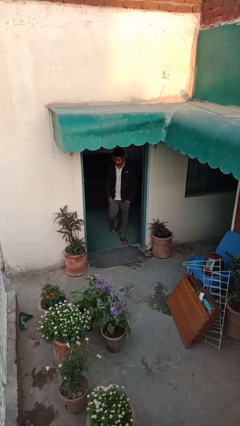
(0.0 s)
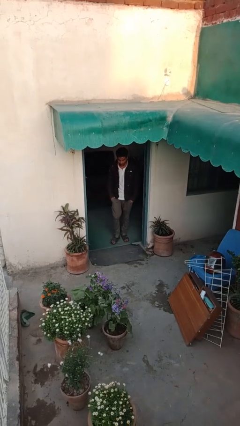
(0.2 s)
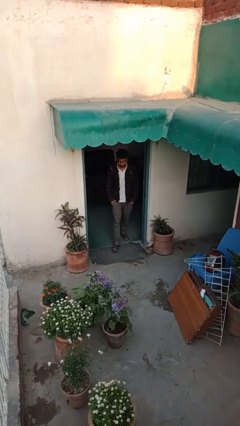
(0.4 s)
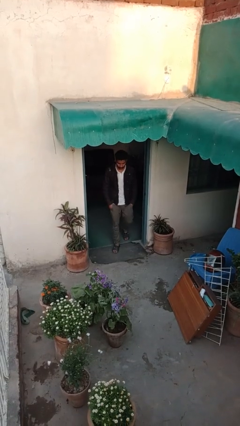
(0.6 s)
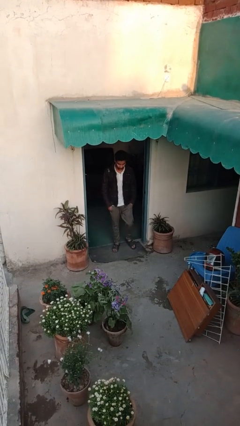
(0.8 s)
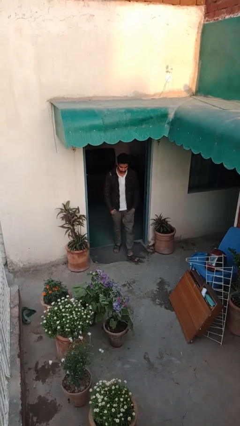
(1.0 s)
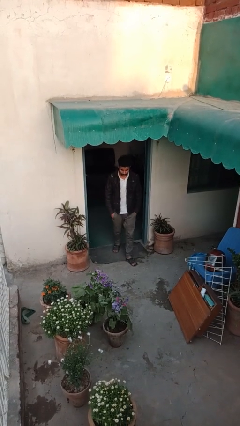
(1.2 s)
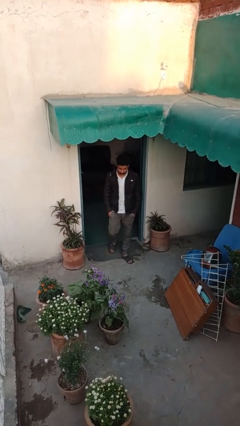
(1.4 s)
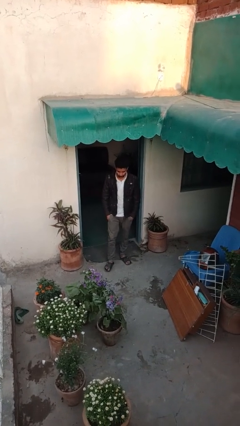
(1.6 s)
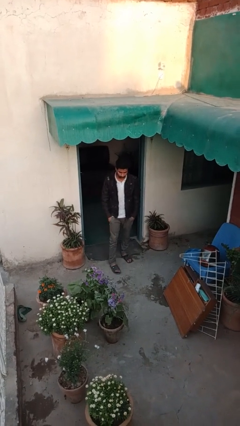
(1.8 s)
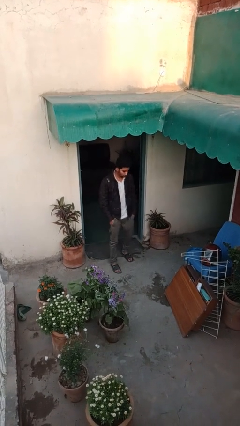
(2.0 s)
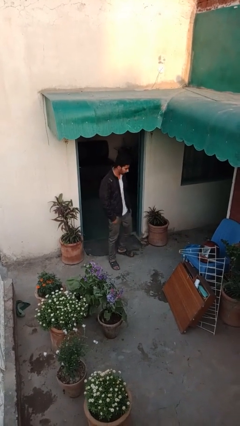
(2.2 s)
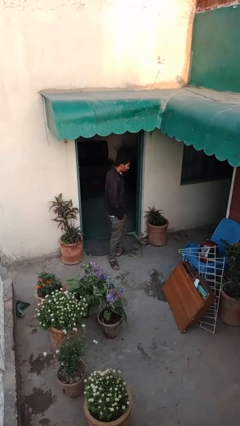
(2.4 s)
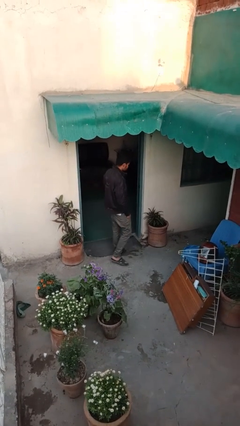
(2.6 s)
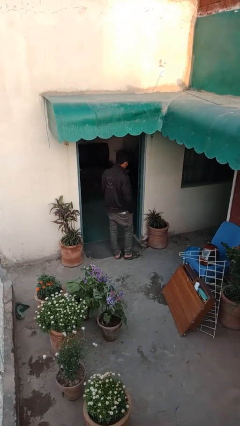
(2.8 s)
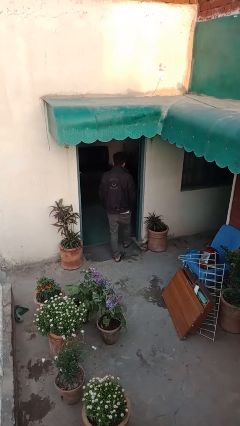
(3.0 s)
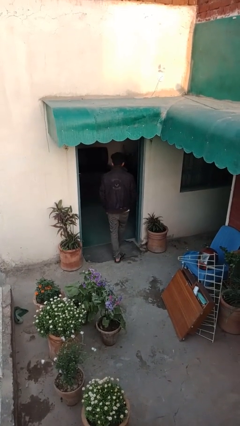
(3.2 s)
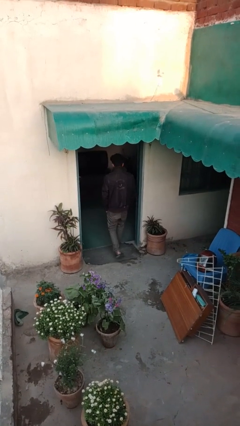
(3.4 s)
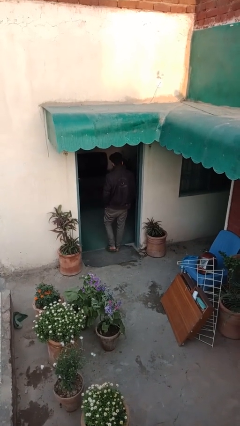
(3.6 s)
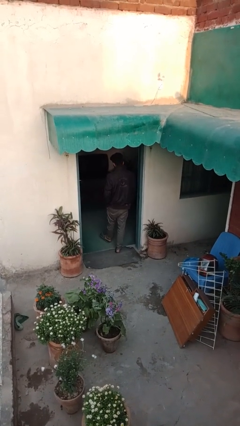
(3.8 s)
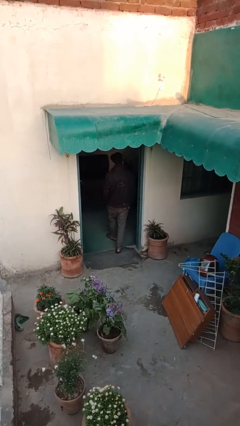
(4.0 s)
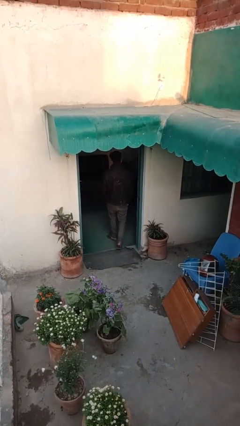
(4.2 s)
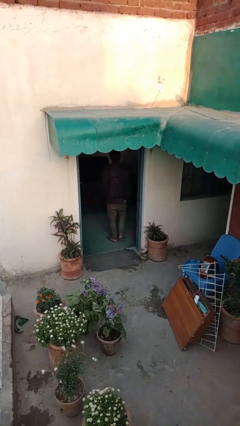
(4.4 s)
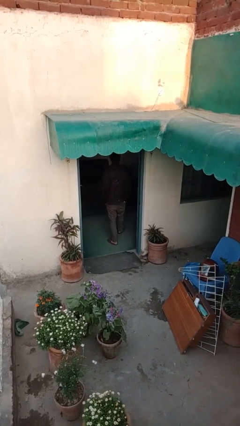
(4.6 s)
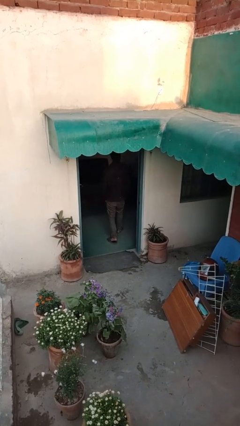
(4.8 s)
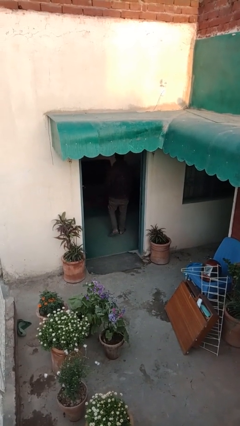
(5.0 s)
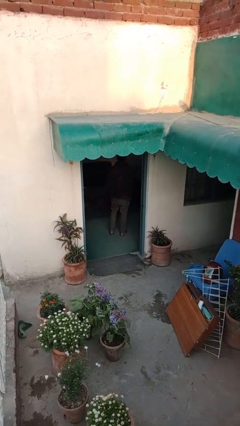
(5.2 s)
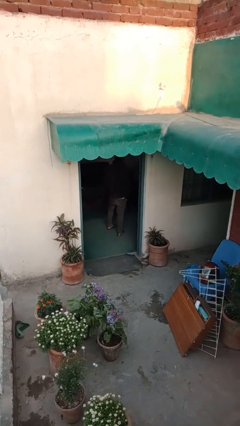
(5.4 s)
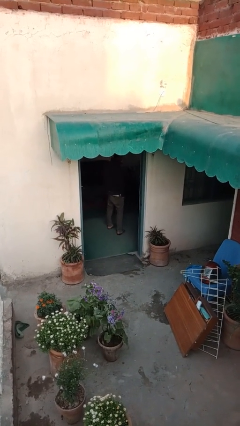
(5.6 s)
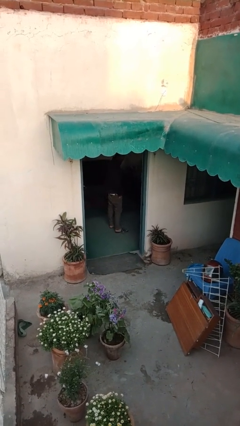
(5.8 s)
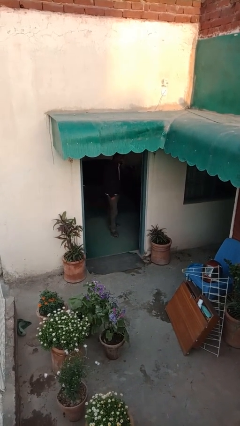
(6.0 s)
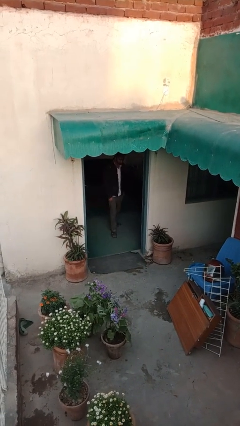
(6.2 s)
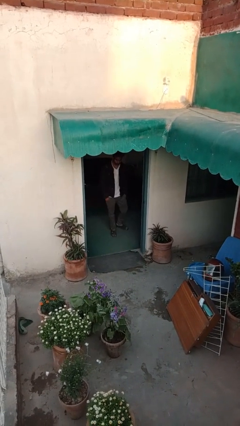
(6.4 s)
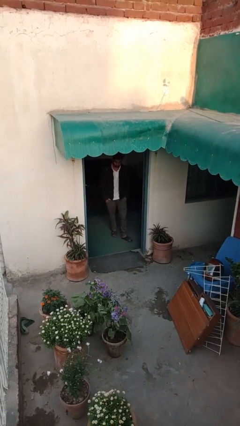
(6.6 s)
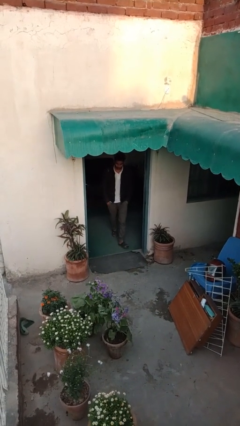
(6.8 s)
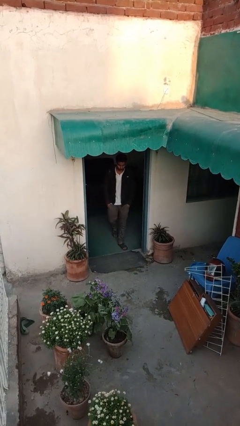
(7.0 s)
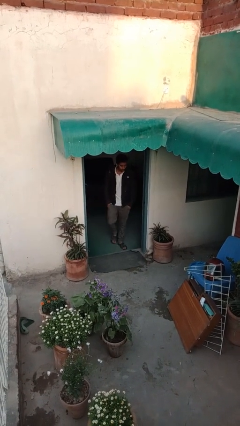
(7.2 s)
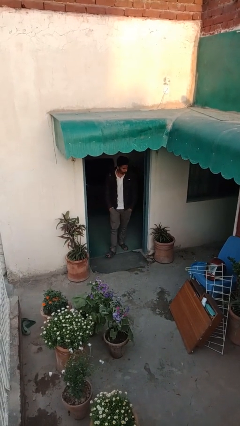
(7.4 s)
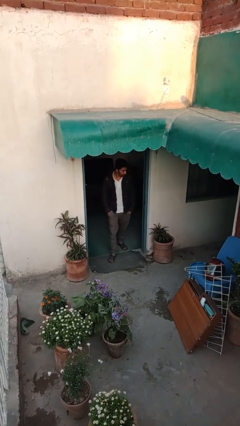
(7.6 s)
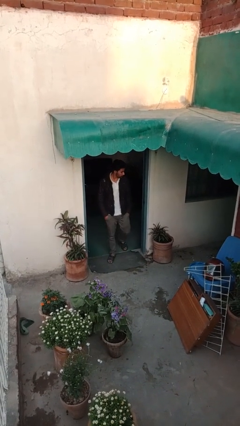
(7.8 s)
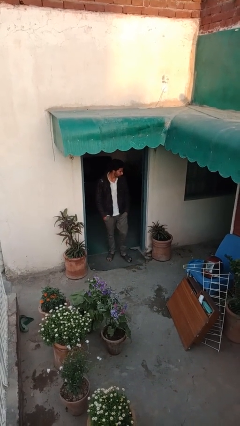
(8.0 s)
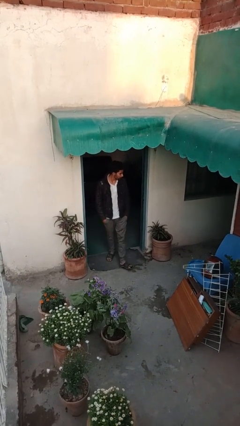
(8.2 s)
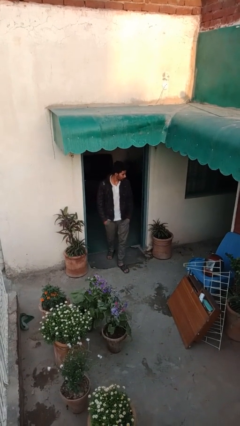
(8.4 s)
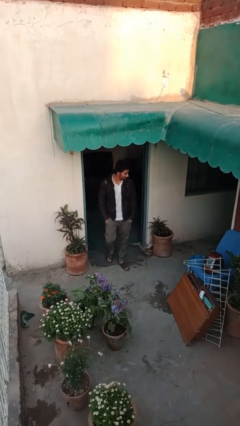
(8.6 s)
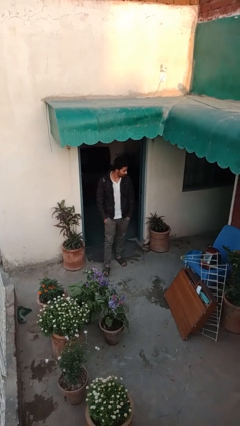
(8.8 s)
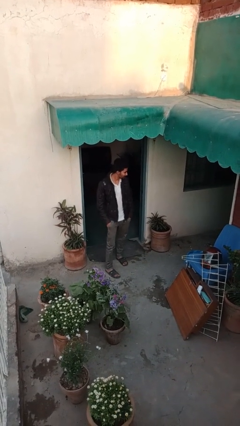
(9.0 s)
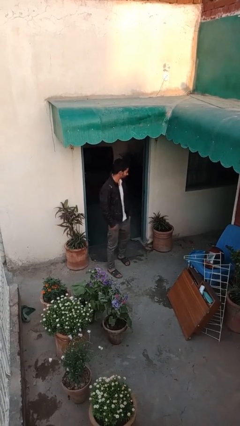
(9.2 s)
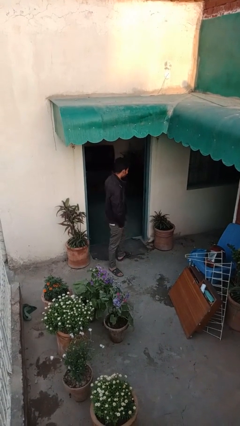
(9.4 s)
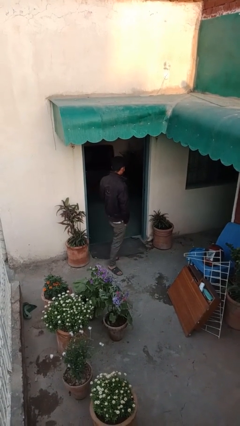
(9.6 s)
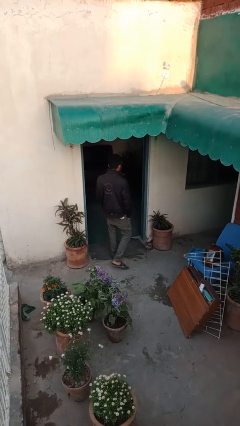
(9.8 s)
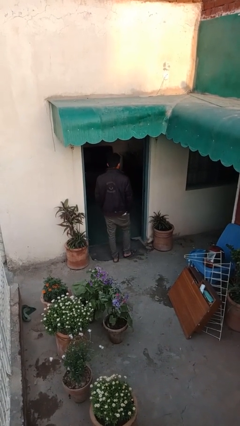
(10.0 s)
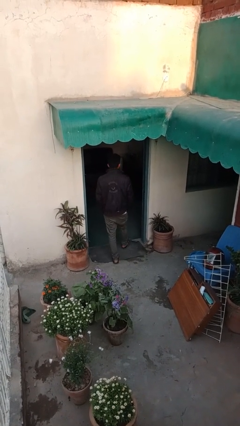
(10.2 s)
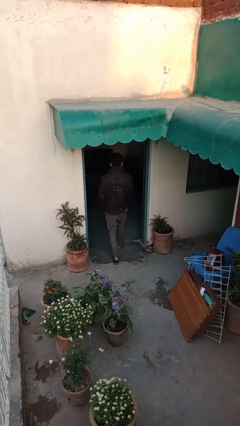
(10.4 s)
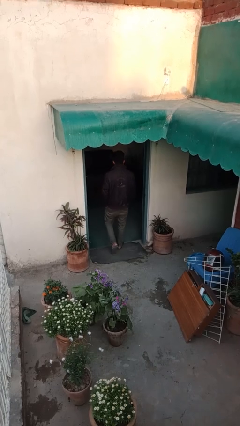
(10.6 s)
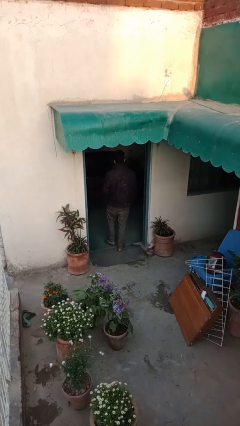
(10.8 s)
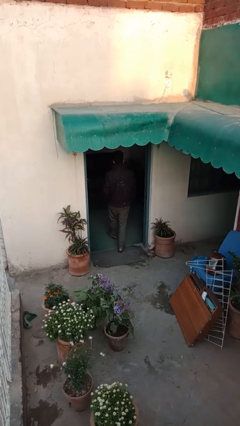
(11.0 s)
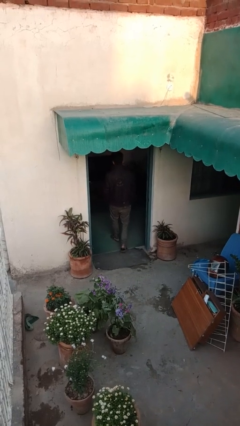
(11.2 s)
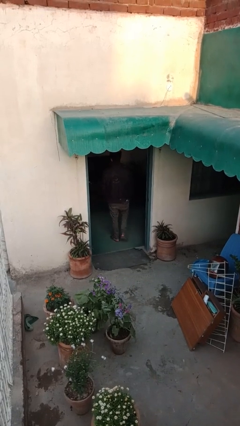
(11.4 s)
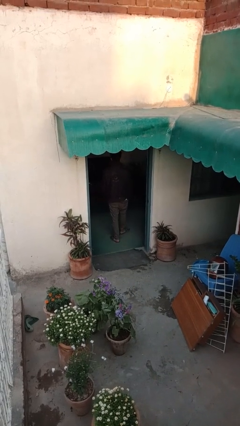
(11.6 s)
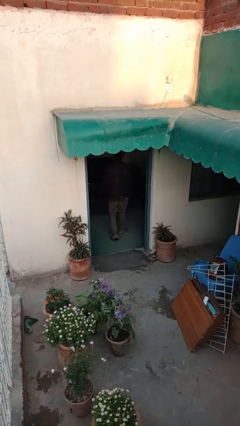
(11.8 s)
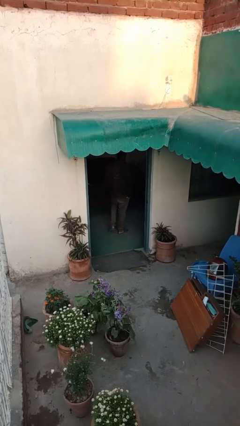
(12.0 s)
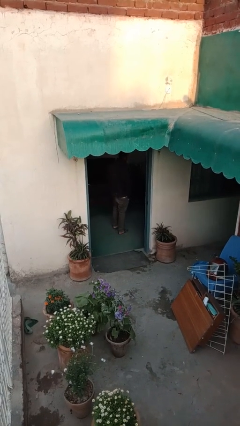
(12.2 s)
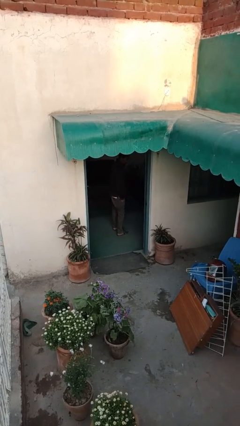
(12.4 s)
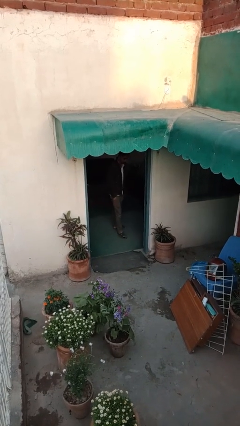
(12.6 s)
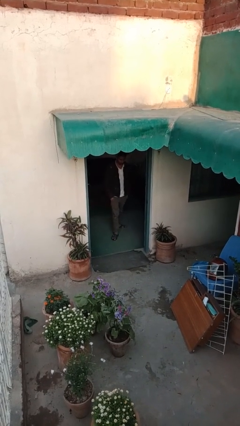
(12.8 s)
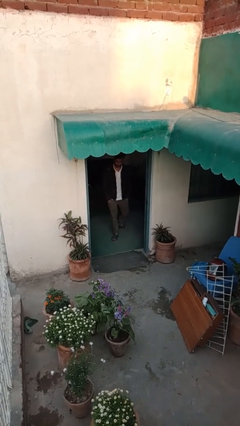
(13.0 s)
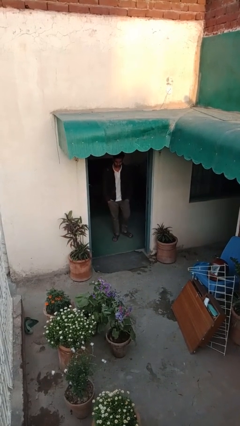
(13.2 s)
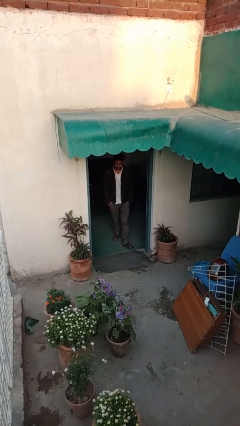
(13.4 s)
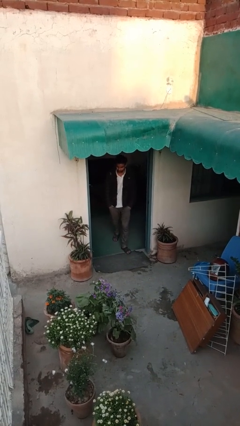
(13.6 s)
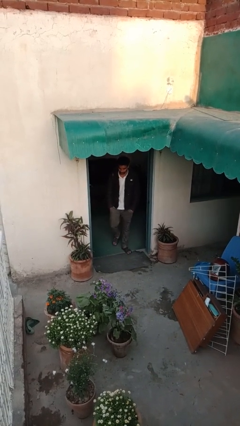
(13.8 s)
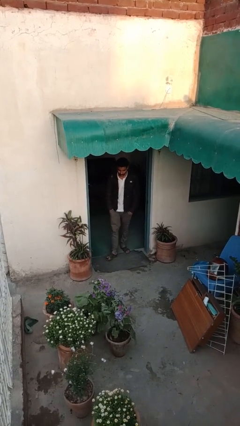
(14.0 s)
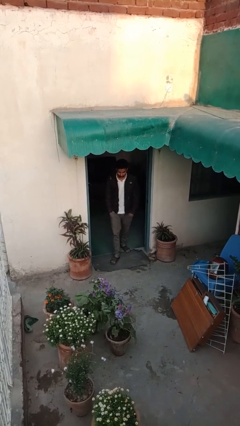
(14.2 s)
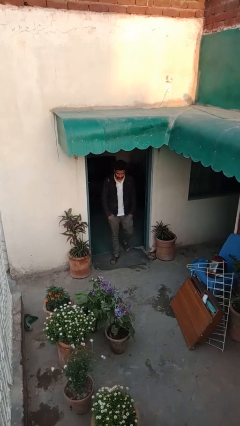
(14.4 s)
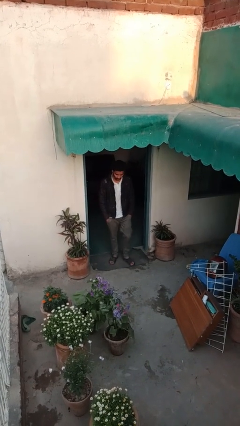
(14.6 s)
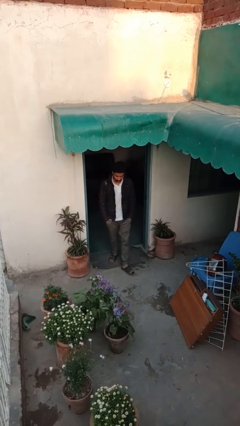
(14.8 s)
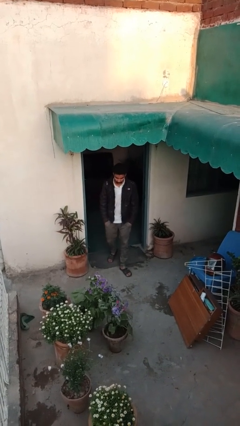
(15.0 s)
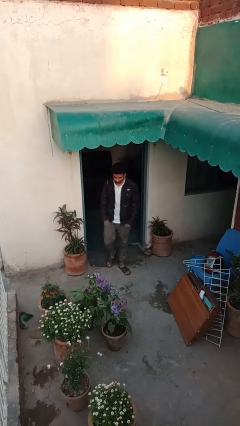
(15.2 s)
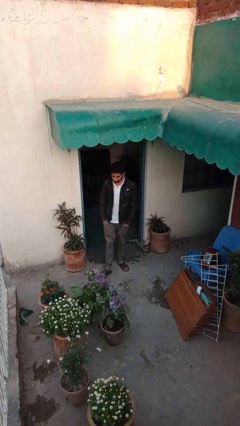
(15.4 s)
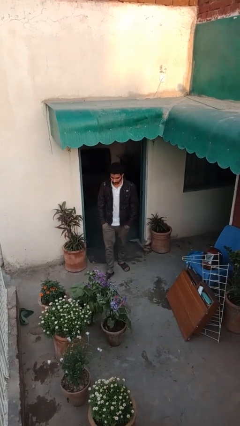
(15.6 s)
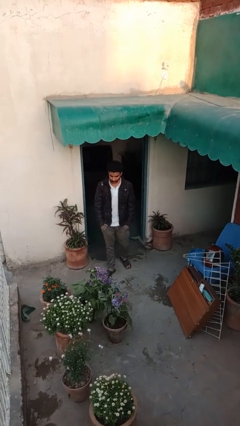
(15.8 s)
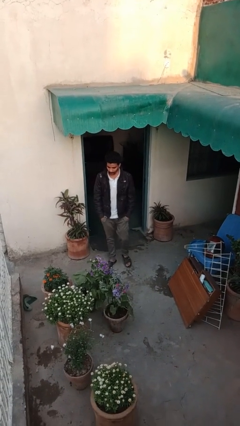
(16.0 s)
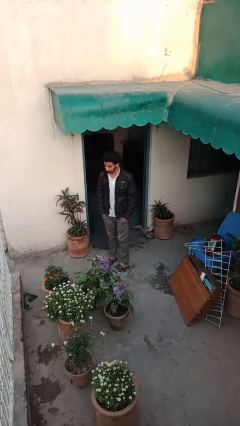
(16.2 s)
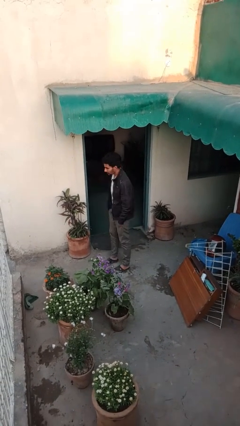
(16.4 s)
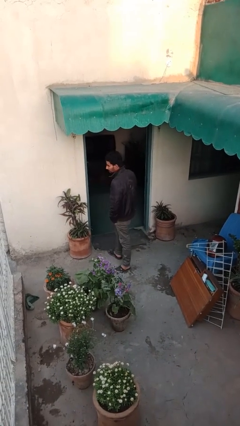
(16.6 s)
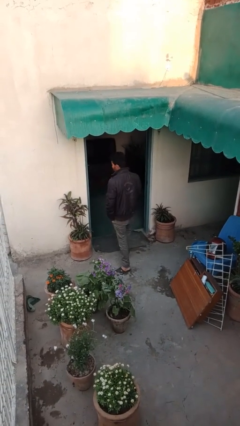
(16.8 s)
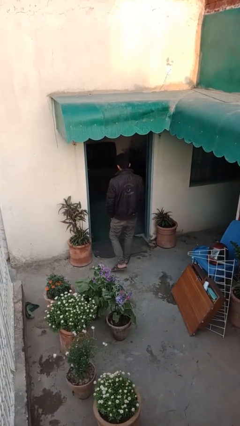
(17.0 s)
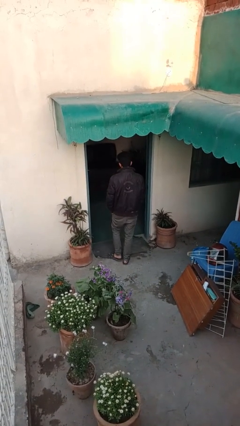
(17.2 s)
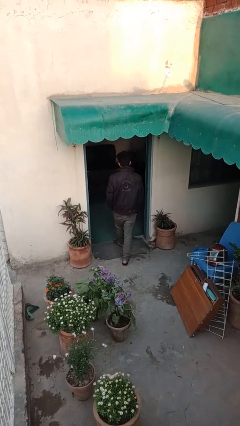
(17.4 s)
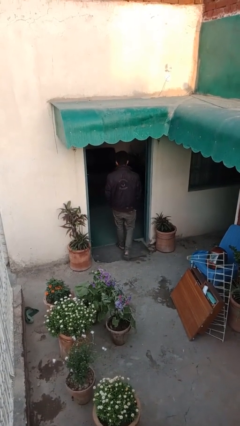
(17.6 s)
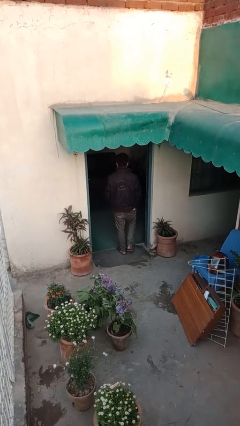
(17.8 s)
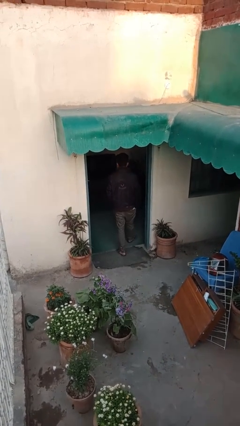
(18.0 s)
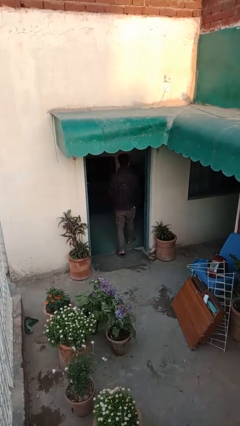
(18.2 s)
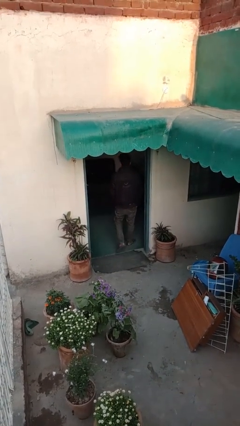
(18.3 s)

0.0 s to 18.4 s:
person texts on phone

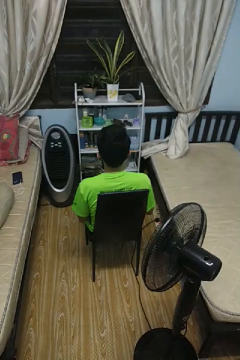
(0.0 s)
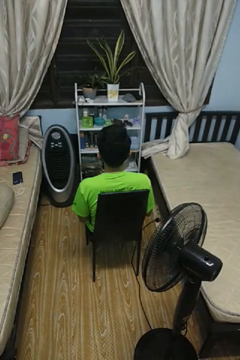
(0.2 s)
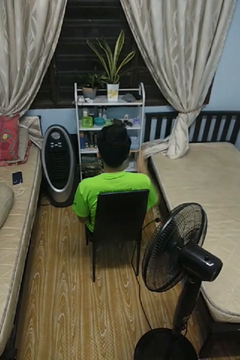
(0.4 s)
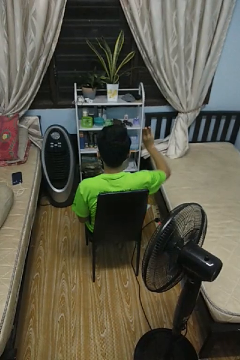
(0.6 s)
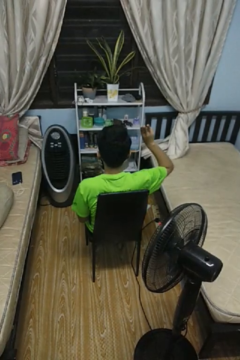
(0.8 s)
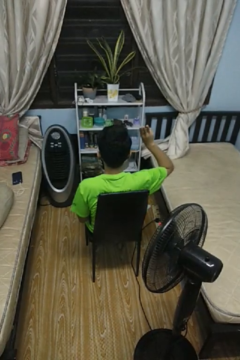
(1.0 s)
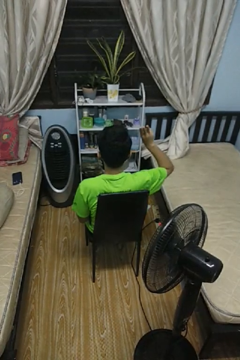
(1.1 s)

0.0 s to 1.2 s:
person gestures number three
